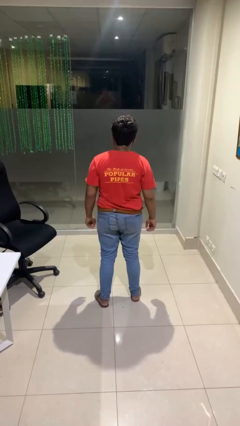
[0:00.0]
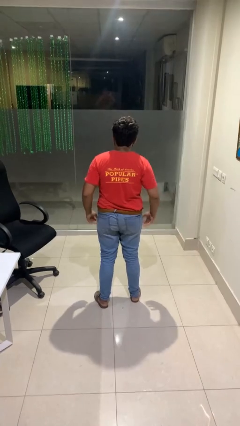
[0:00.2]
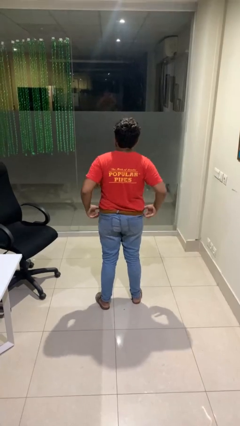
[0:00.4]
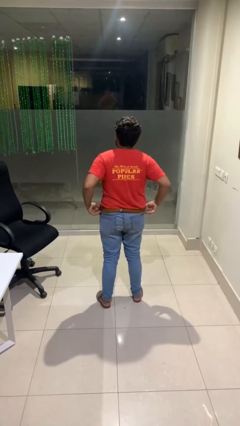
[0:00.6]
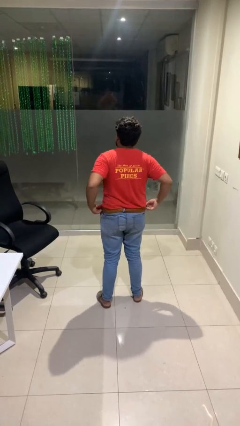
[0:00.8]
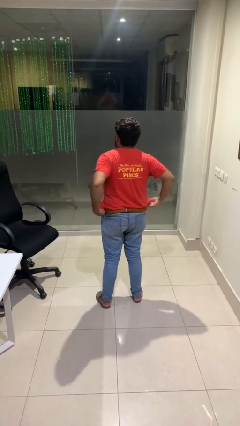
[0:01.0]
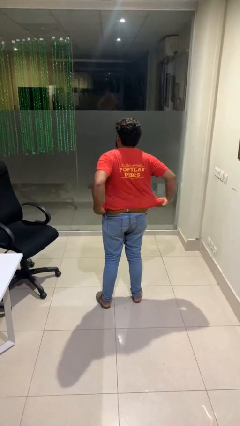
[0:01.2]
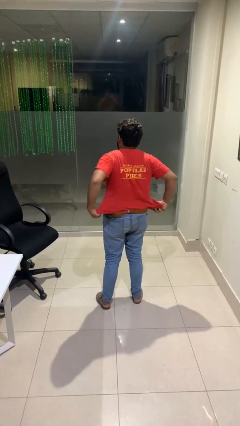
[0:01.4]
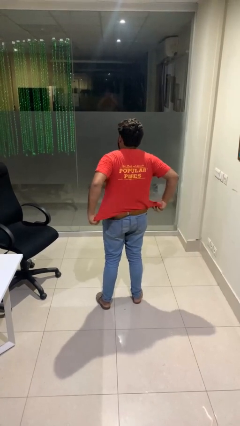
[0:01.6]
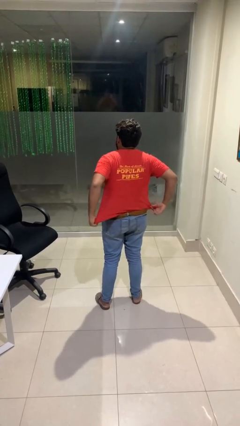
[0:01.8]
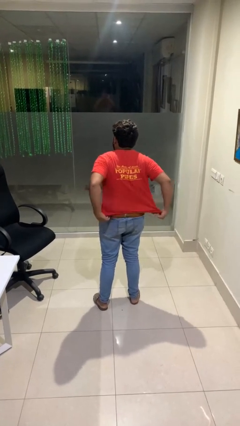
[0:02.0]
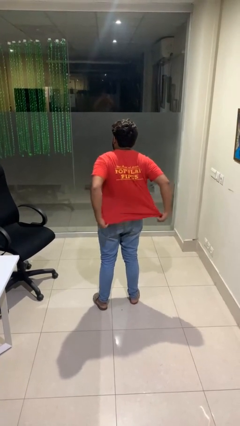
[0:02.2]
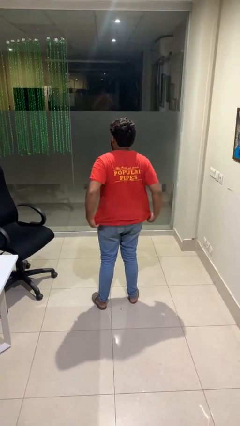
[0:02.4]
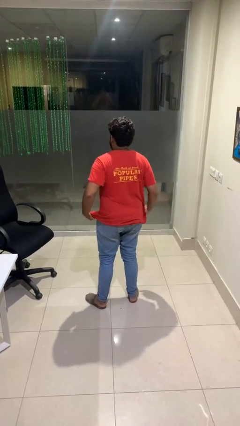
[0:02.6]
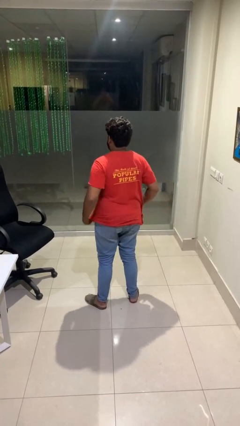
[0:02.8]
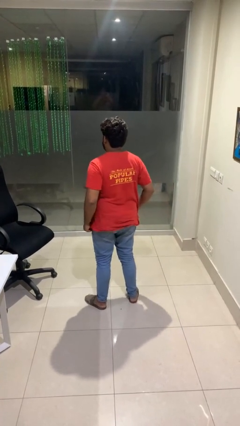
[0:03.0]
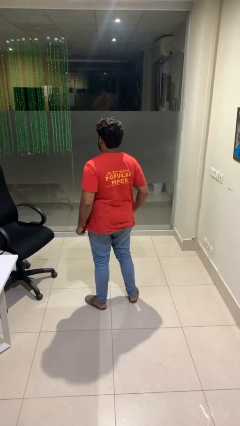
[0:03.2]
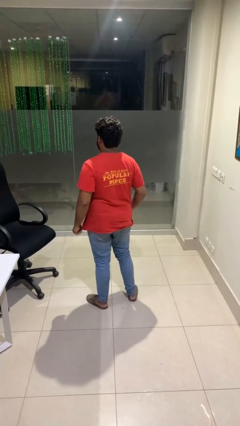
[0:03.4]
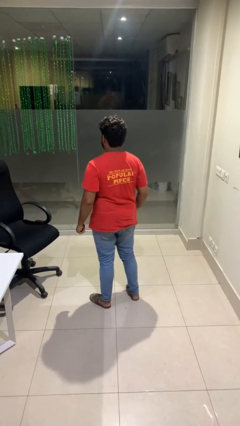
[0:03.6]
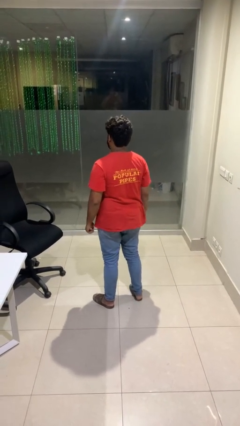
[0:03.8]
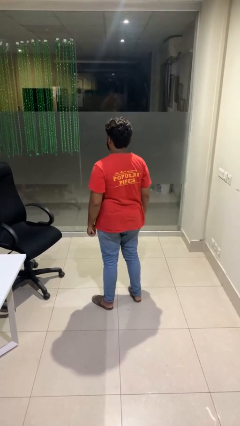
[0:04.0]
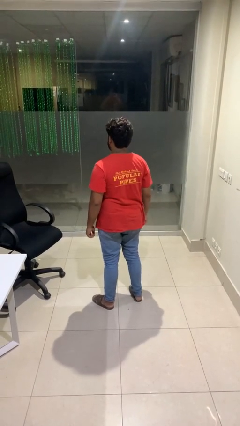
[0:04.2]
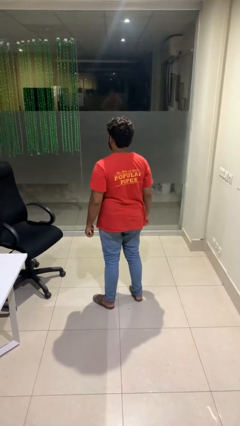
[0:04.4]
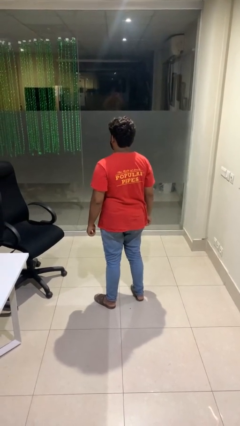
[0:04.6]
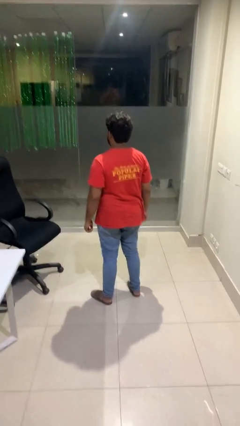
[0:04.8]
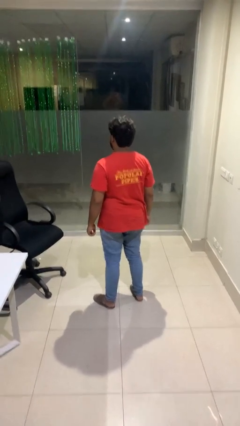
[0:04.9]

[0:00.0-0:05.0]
person untucks shirt

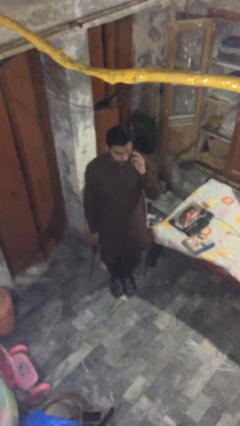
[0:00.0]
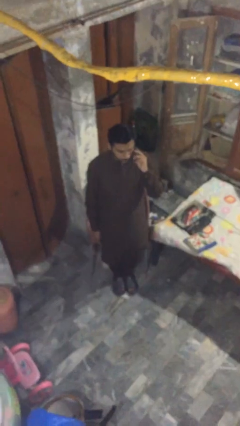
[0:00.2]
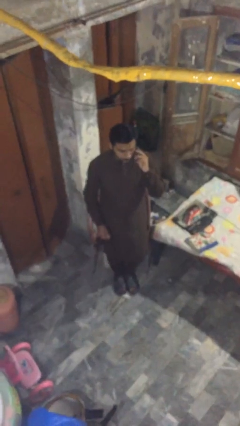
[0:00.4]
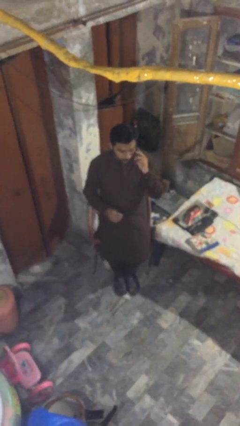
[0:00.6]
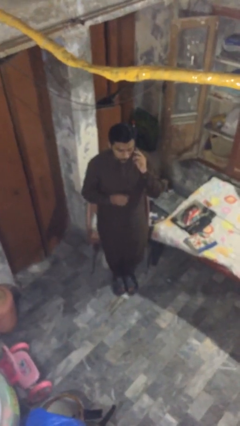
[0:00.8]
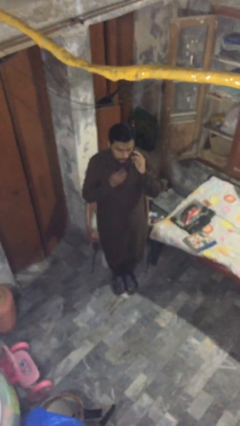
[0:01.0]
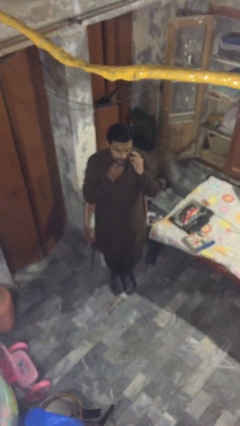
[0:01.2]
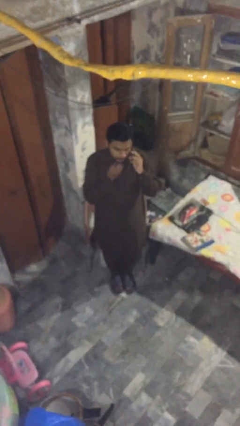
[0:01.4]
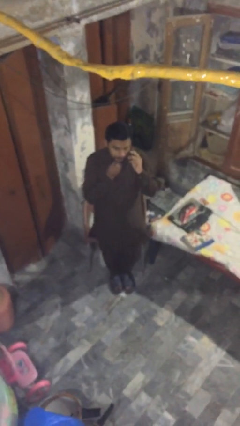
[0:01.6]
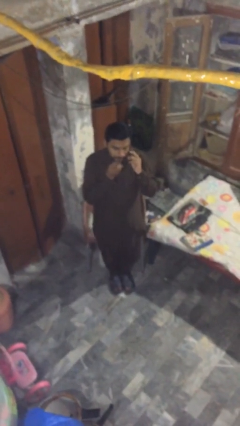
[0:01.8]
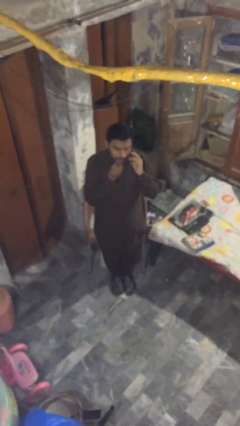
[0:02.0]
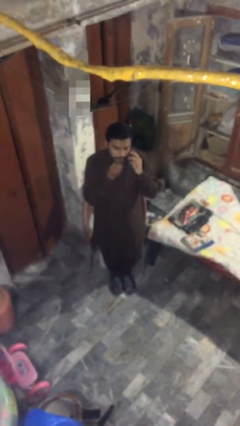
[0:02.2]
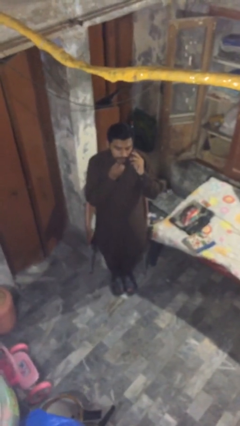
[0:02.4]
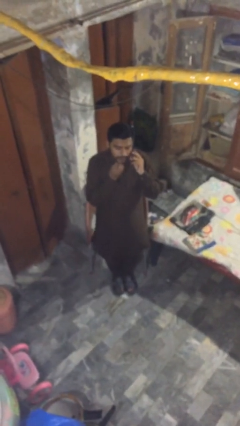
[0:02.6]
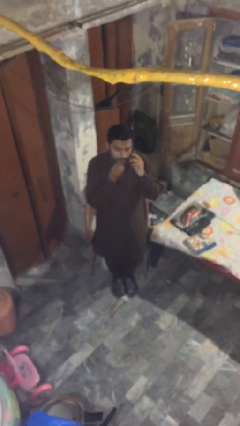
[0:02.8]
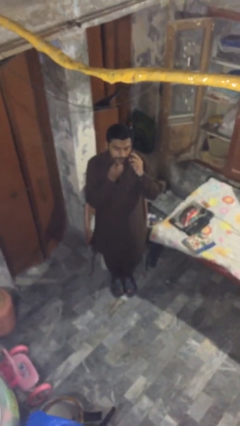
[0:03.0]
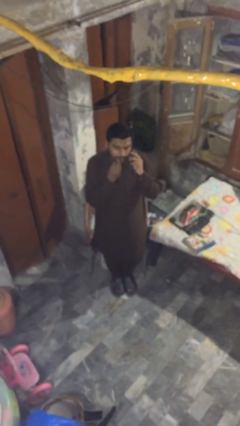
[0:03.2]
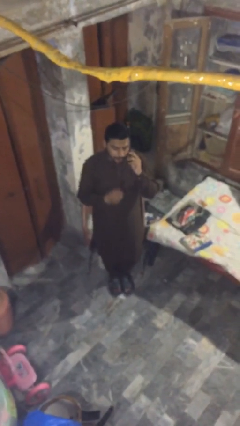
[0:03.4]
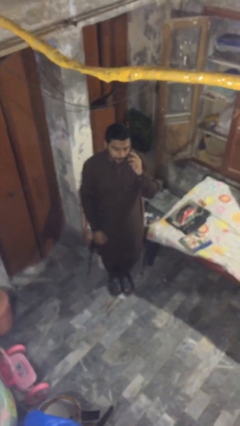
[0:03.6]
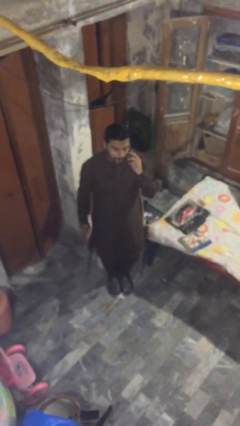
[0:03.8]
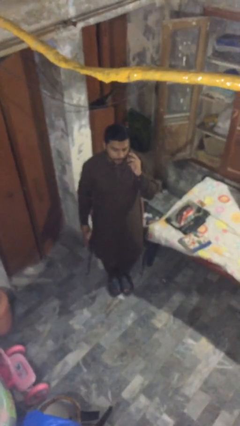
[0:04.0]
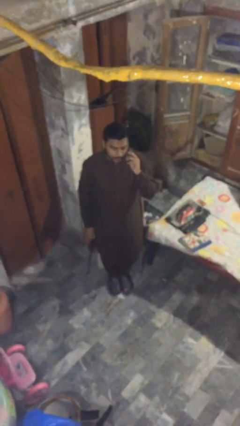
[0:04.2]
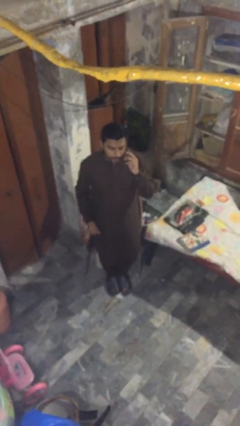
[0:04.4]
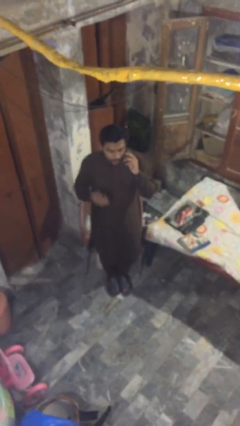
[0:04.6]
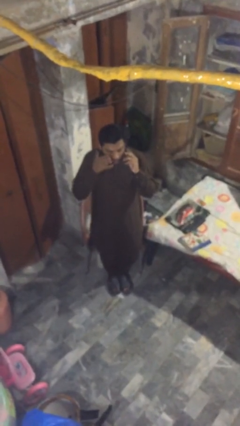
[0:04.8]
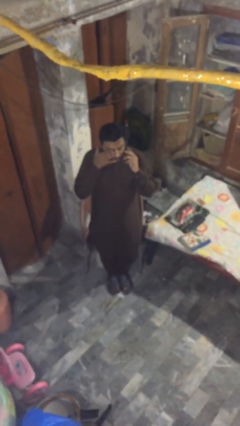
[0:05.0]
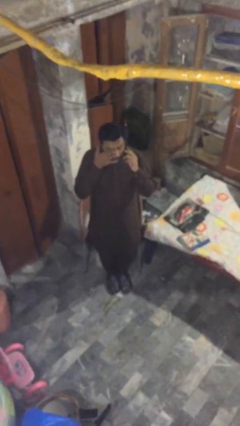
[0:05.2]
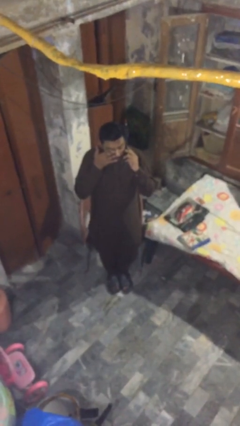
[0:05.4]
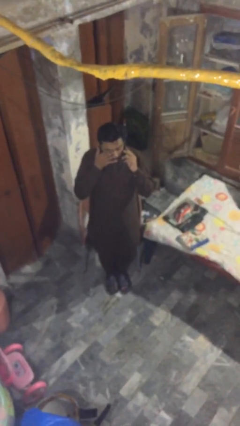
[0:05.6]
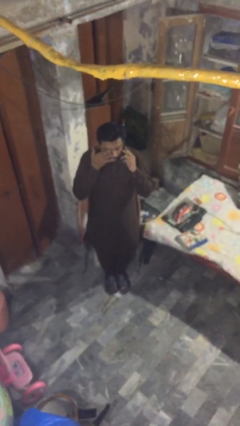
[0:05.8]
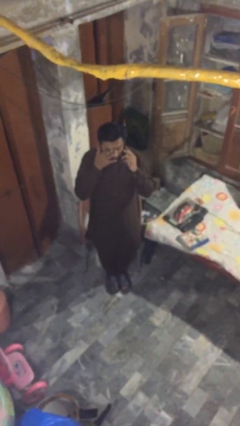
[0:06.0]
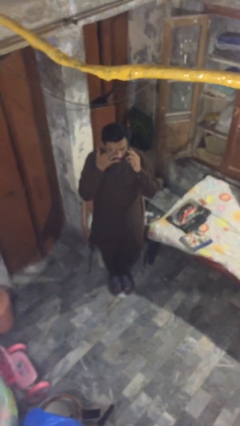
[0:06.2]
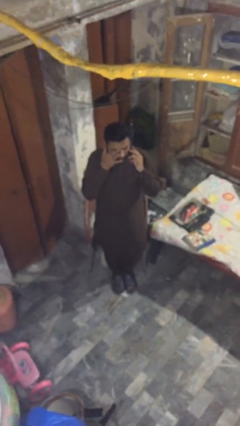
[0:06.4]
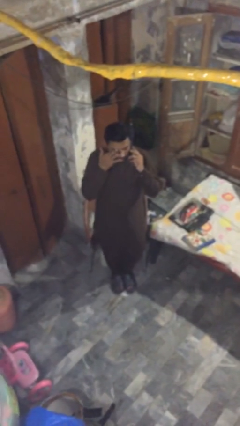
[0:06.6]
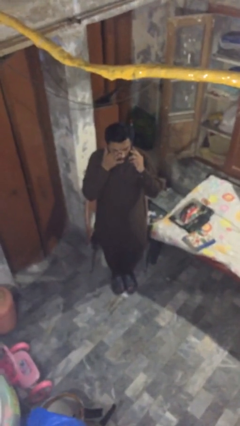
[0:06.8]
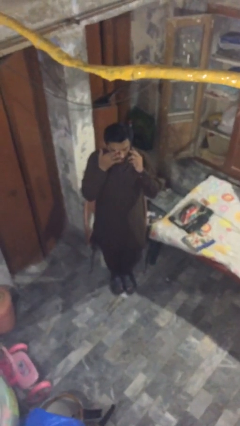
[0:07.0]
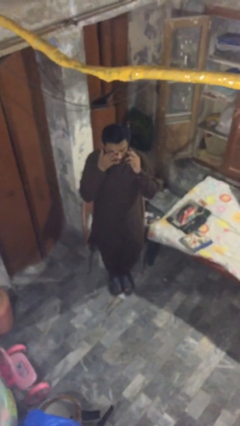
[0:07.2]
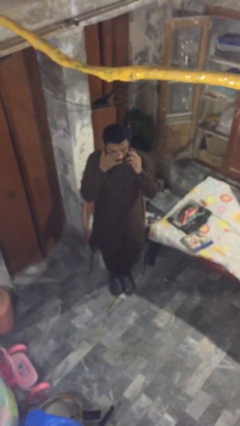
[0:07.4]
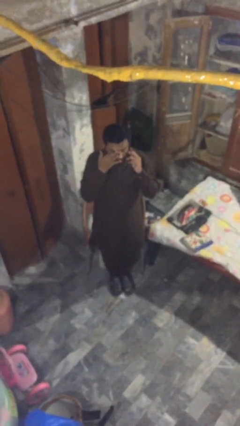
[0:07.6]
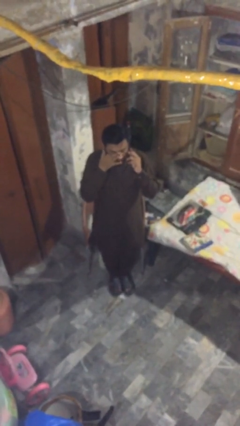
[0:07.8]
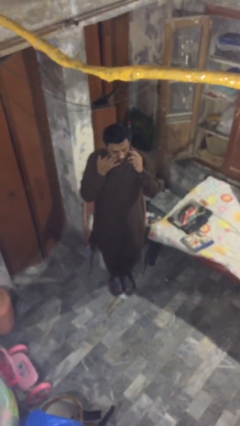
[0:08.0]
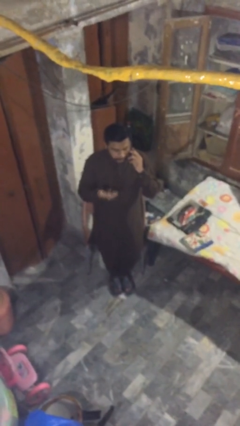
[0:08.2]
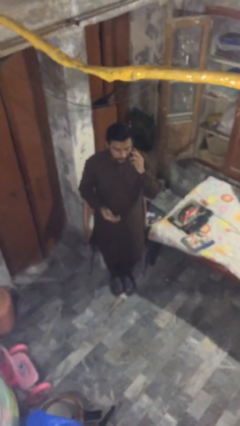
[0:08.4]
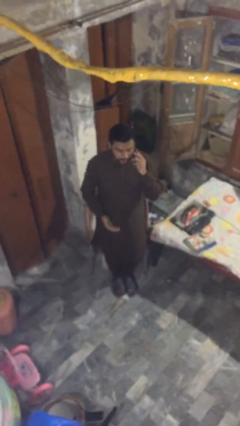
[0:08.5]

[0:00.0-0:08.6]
person talks on phone

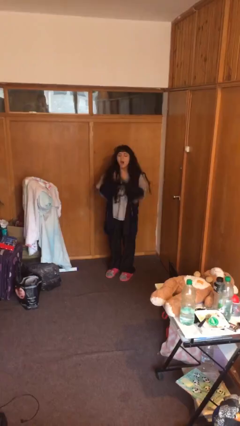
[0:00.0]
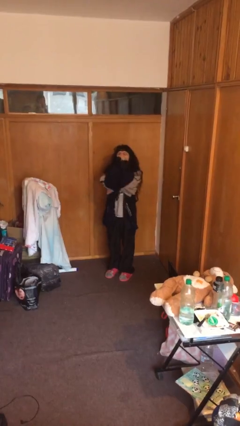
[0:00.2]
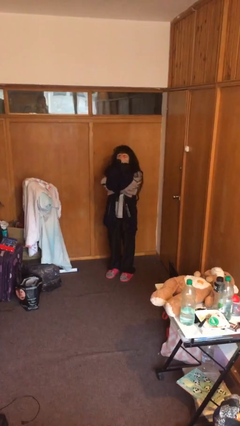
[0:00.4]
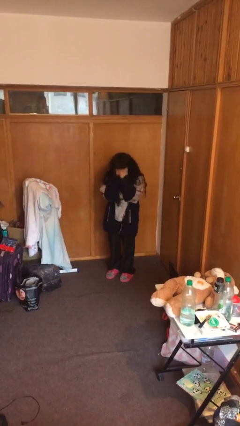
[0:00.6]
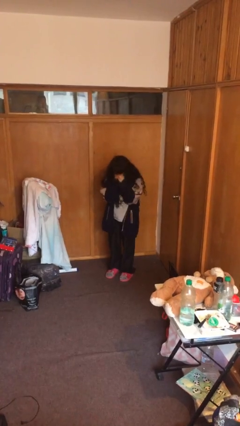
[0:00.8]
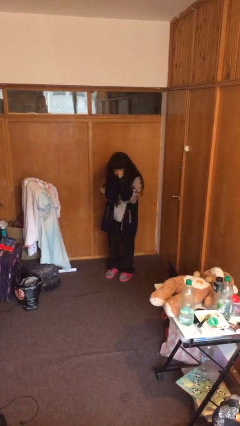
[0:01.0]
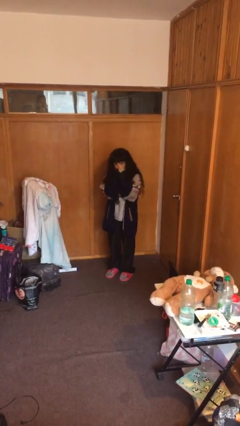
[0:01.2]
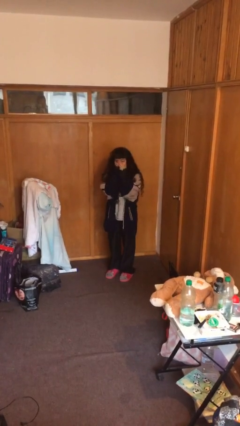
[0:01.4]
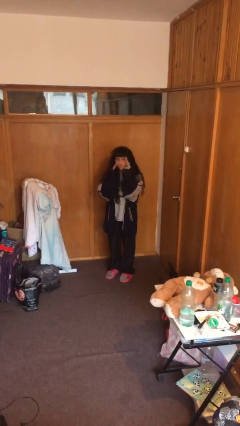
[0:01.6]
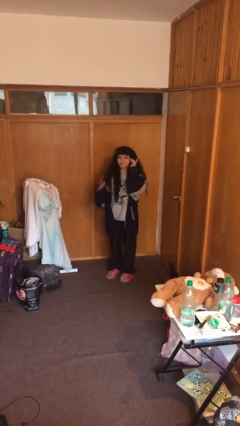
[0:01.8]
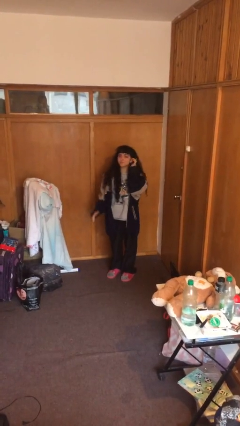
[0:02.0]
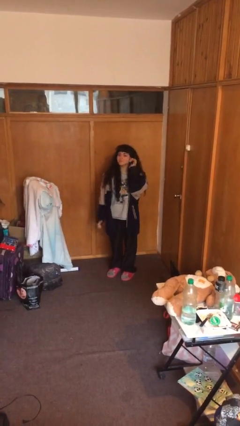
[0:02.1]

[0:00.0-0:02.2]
person sneezes into hand

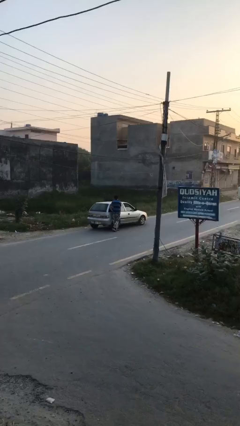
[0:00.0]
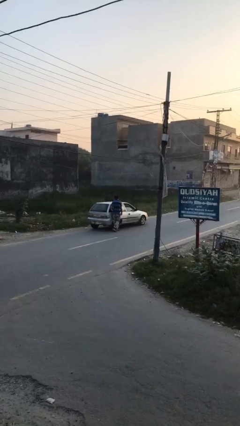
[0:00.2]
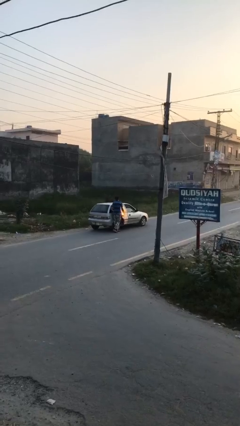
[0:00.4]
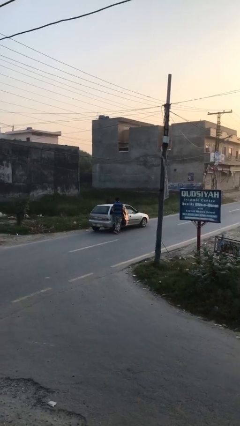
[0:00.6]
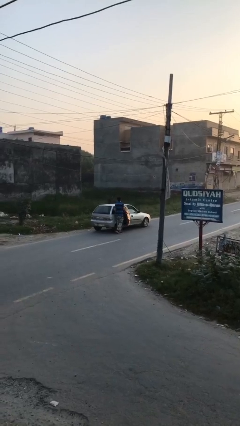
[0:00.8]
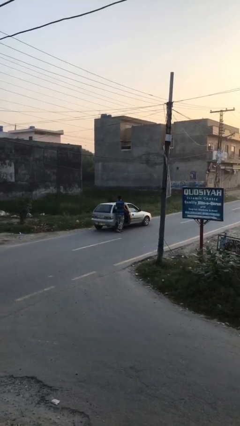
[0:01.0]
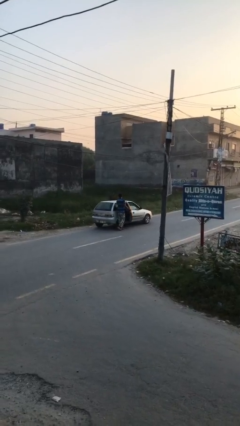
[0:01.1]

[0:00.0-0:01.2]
person opens car door

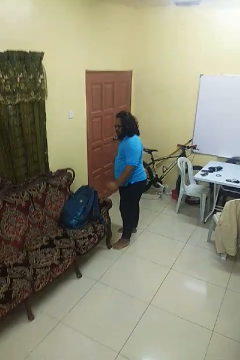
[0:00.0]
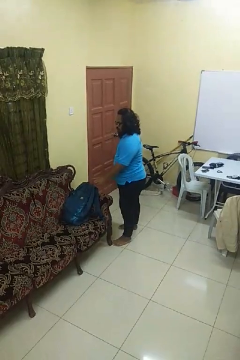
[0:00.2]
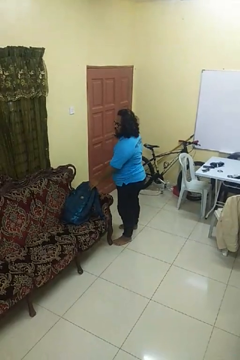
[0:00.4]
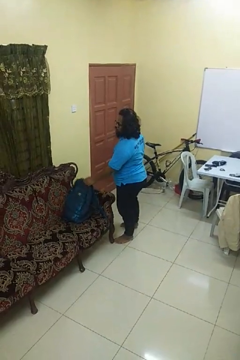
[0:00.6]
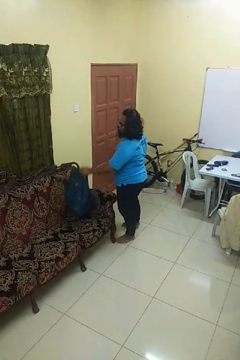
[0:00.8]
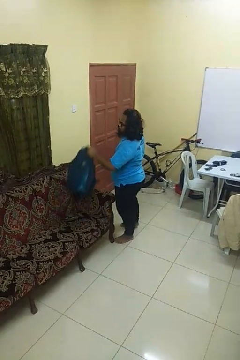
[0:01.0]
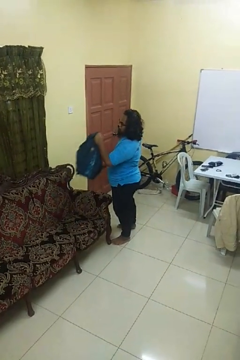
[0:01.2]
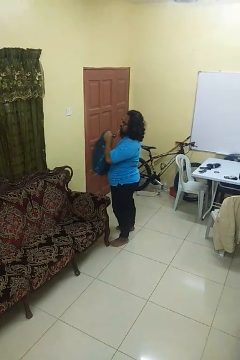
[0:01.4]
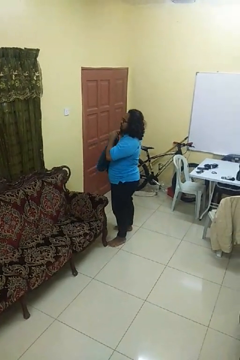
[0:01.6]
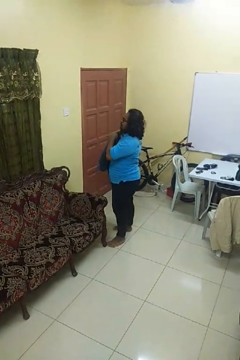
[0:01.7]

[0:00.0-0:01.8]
person picks up object from couch
